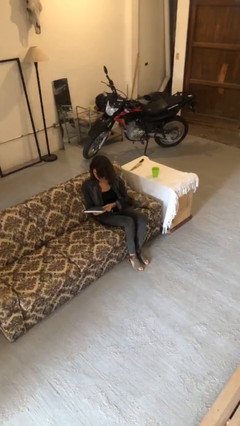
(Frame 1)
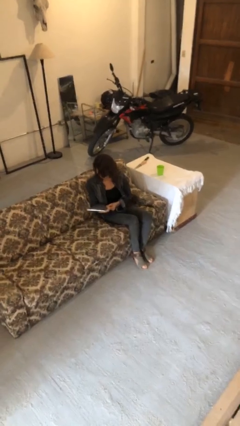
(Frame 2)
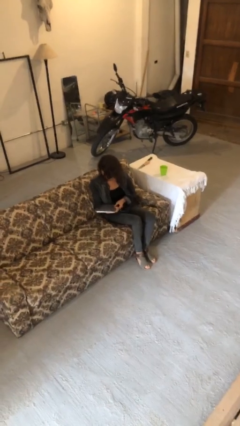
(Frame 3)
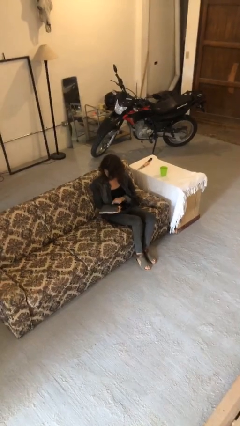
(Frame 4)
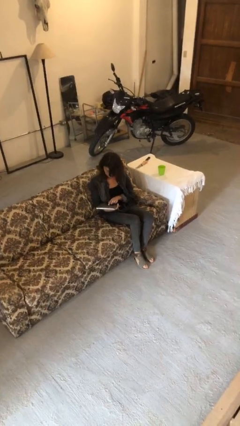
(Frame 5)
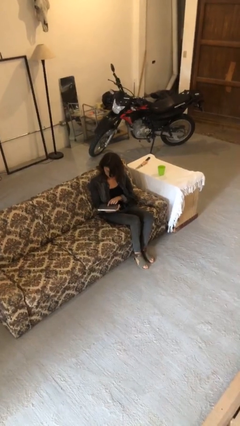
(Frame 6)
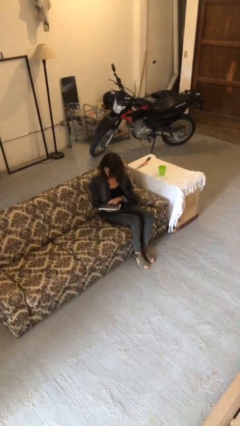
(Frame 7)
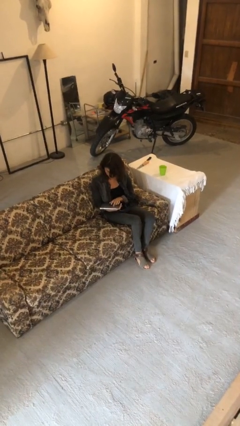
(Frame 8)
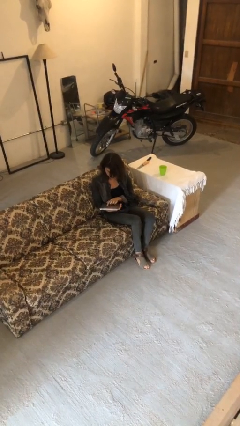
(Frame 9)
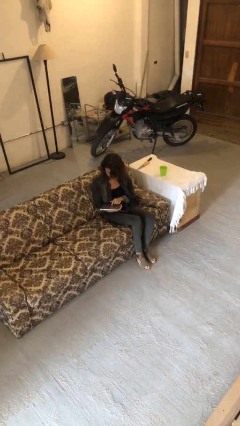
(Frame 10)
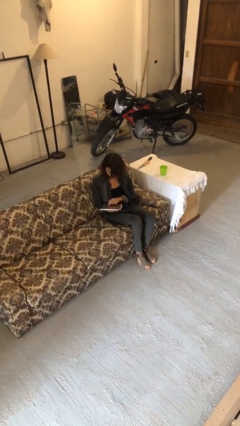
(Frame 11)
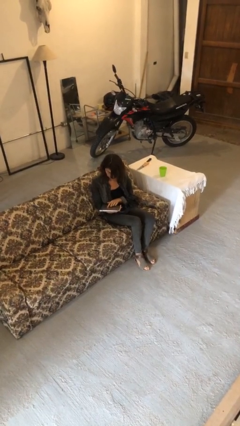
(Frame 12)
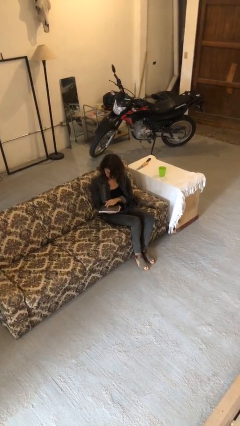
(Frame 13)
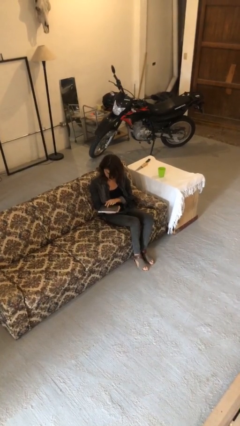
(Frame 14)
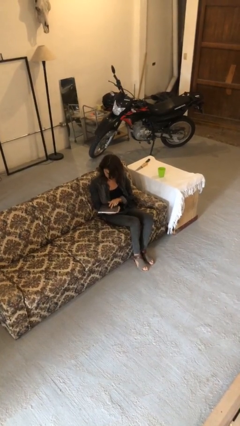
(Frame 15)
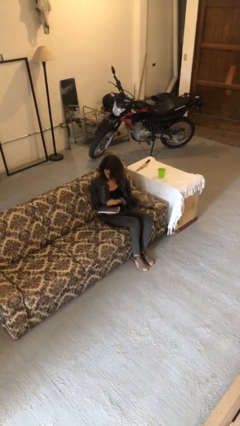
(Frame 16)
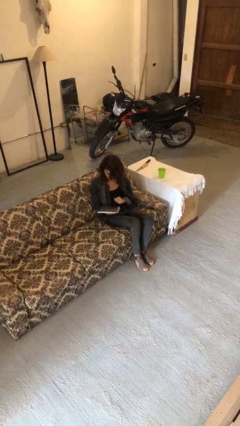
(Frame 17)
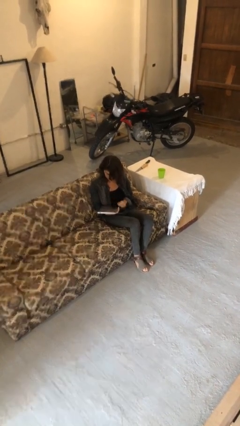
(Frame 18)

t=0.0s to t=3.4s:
person interacts with tablet

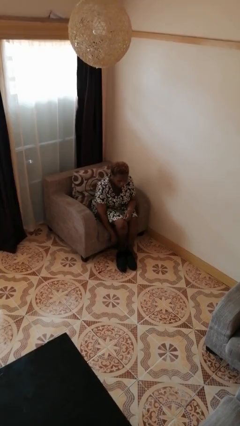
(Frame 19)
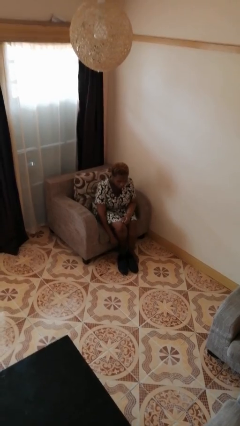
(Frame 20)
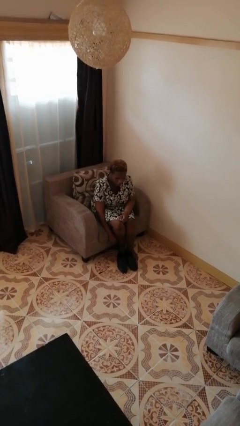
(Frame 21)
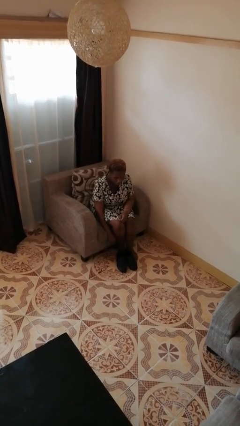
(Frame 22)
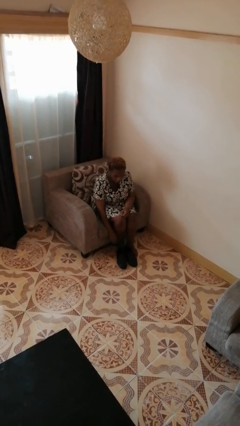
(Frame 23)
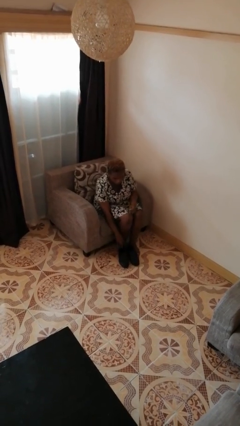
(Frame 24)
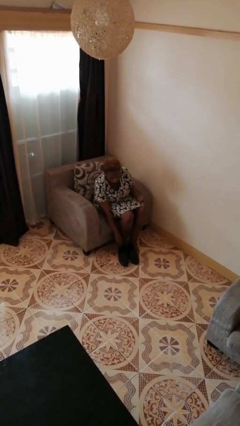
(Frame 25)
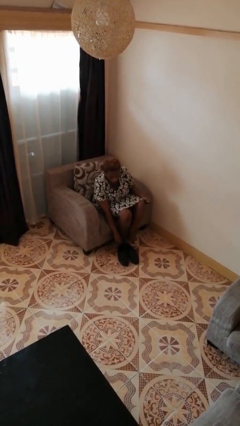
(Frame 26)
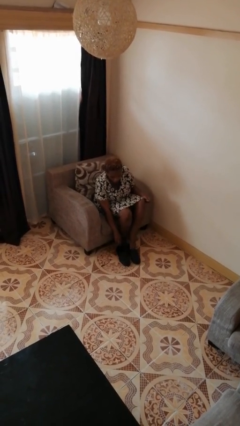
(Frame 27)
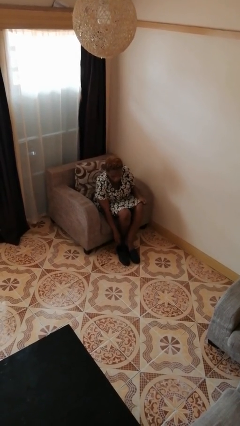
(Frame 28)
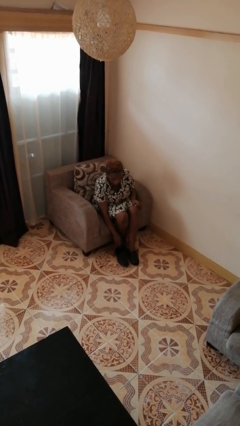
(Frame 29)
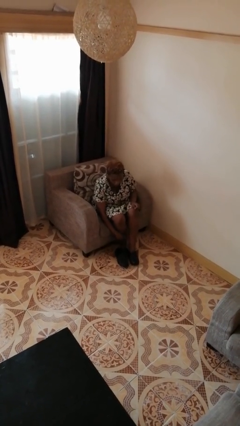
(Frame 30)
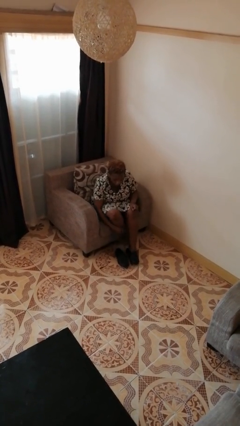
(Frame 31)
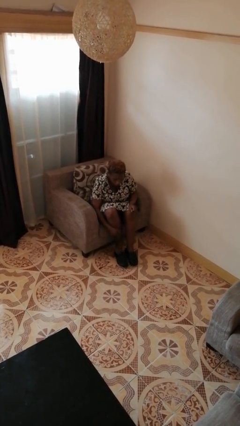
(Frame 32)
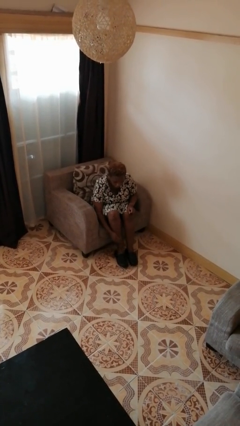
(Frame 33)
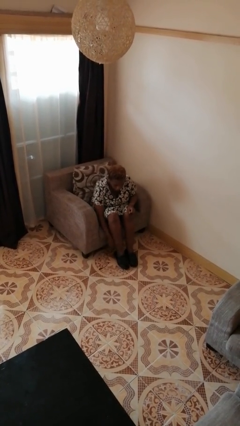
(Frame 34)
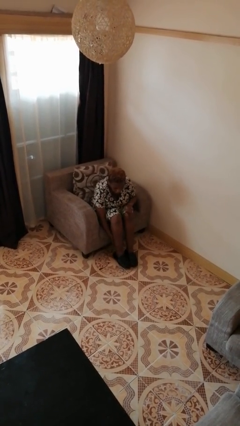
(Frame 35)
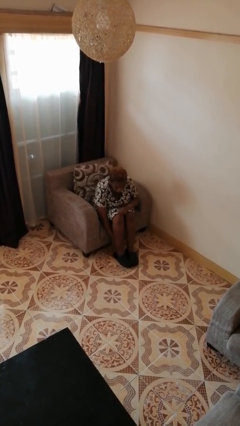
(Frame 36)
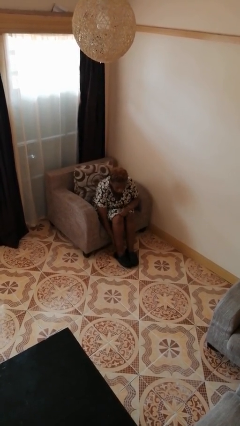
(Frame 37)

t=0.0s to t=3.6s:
person puts on shoes

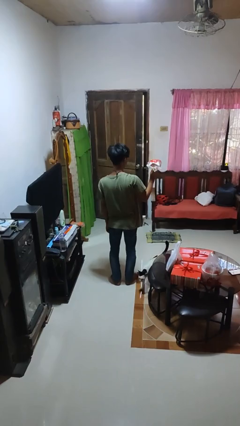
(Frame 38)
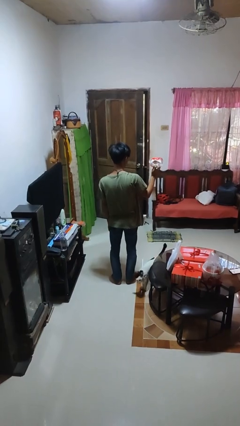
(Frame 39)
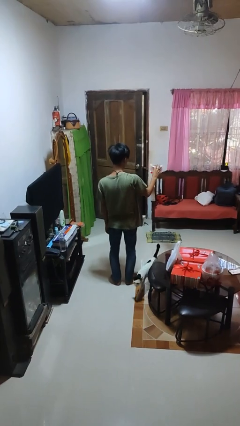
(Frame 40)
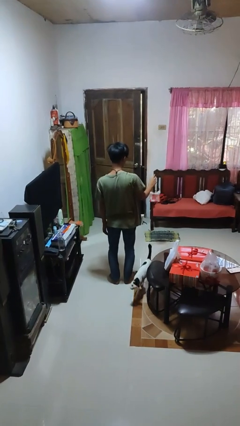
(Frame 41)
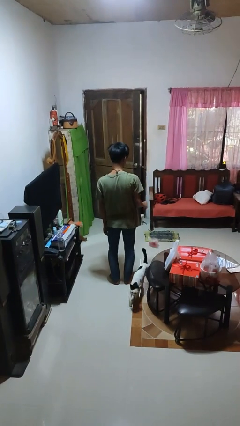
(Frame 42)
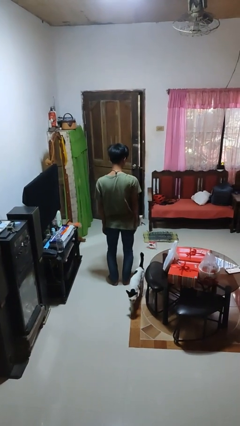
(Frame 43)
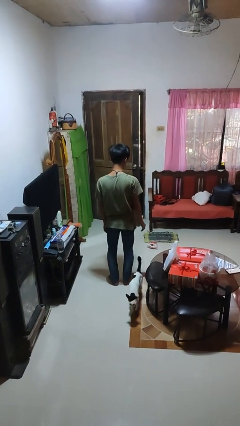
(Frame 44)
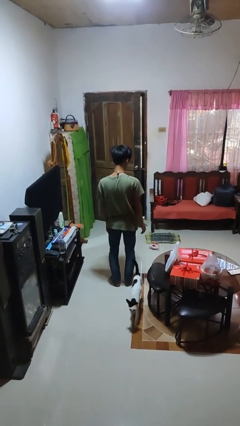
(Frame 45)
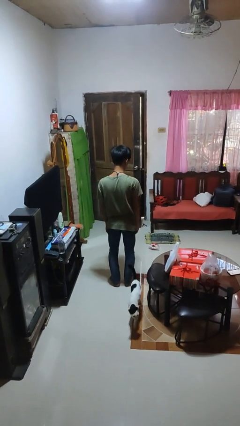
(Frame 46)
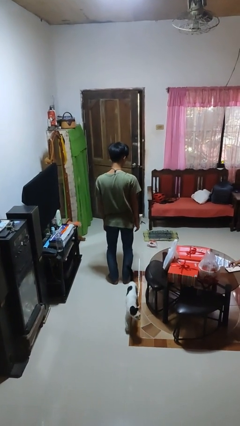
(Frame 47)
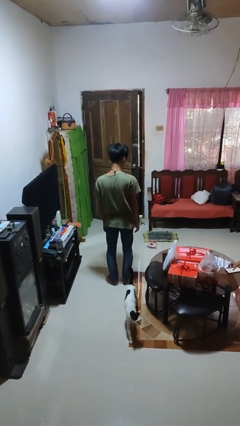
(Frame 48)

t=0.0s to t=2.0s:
person throws object to ground

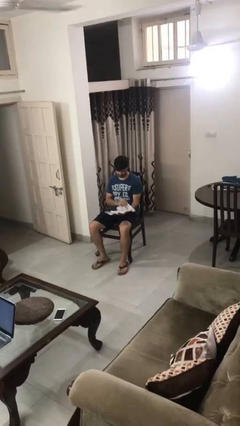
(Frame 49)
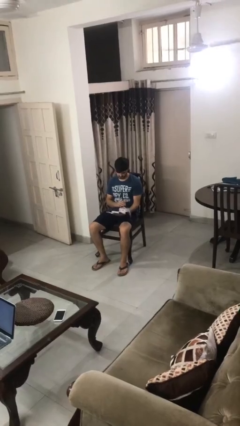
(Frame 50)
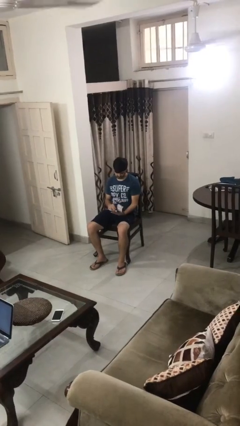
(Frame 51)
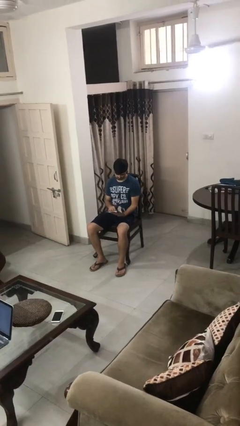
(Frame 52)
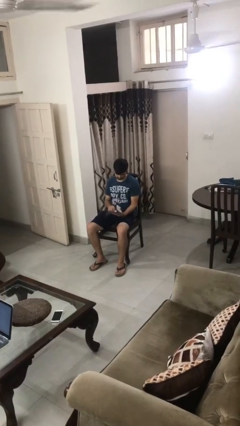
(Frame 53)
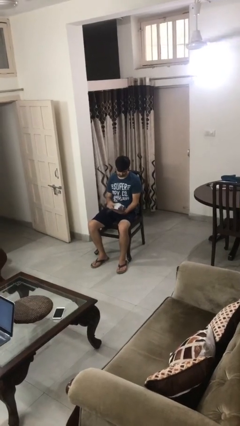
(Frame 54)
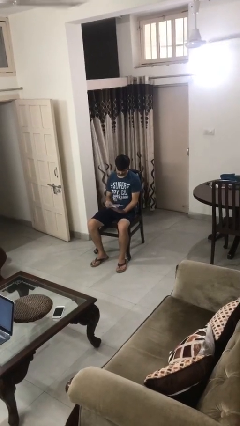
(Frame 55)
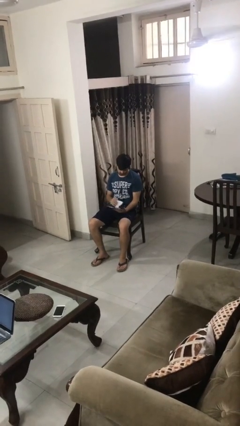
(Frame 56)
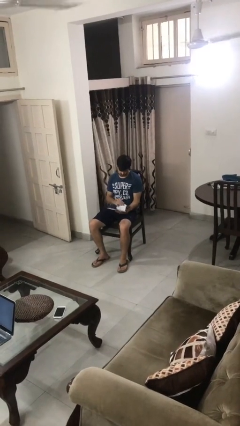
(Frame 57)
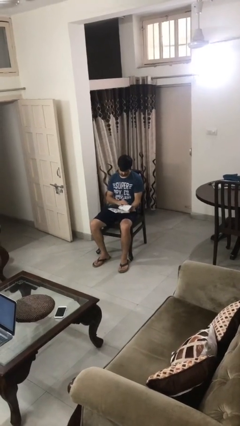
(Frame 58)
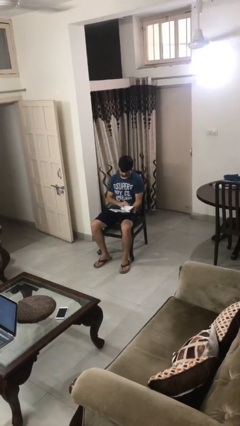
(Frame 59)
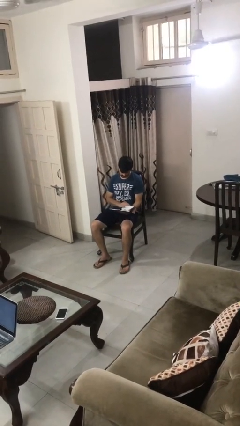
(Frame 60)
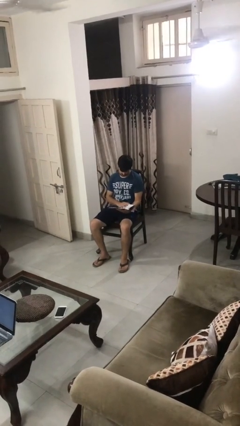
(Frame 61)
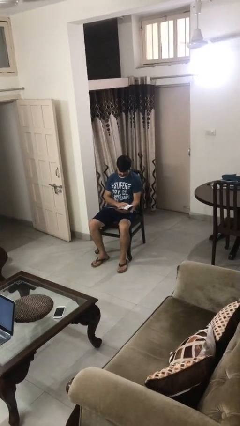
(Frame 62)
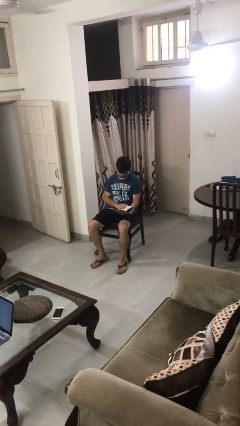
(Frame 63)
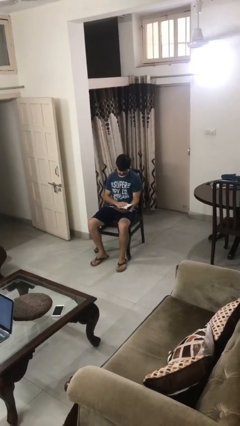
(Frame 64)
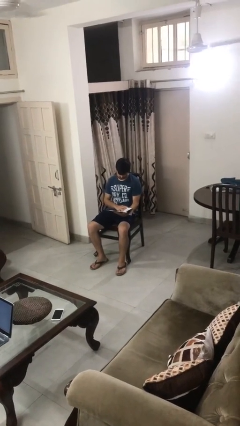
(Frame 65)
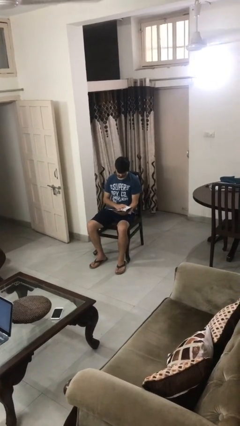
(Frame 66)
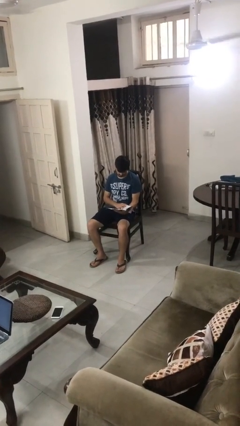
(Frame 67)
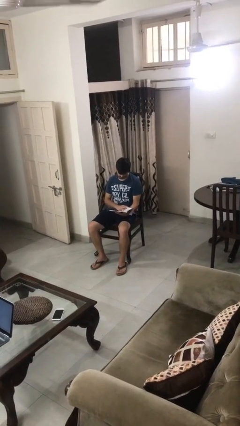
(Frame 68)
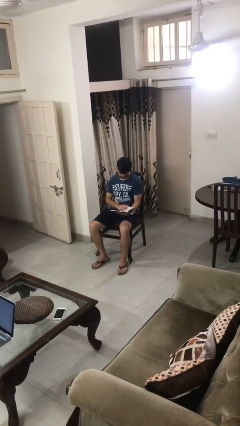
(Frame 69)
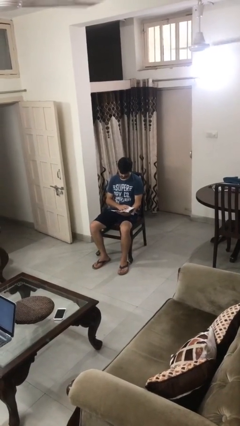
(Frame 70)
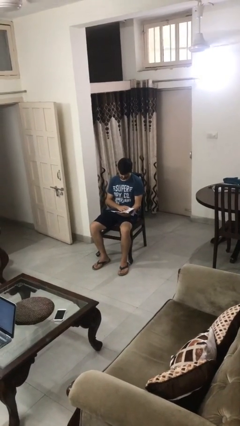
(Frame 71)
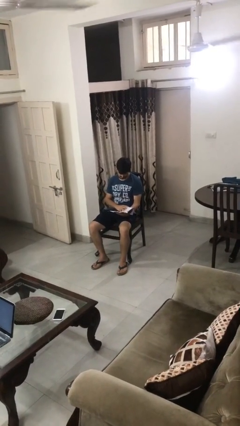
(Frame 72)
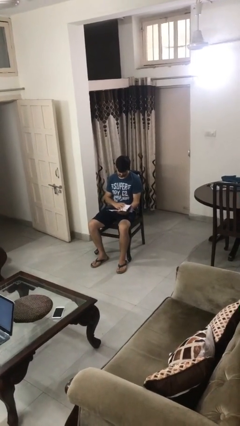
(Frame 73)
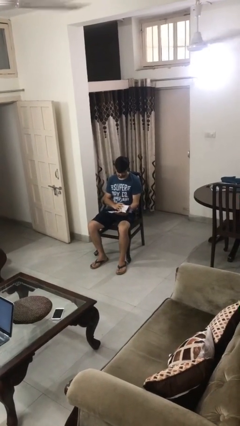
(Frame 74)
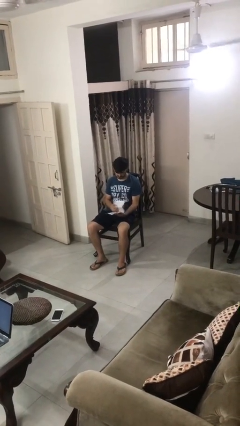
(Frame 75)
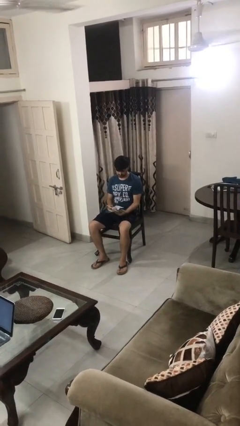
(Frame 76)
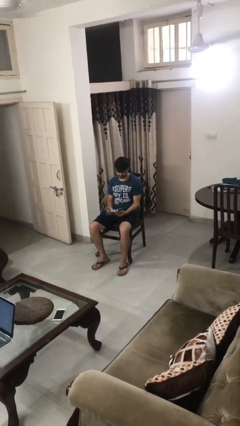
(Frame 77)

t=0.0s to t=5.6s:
person reads magazine

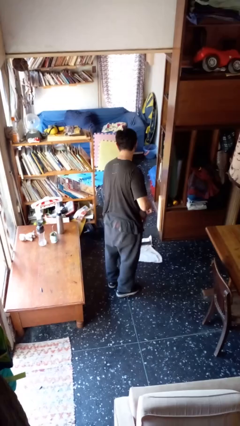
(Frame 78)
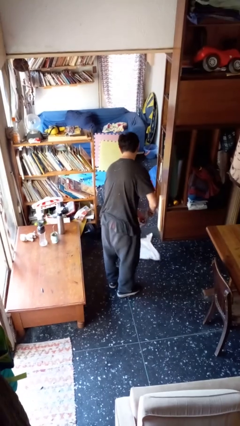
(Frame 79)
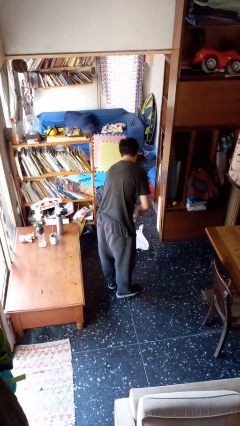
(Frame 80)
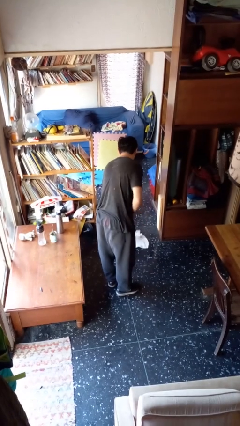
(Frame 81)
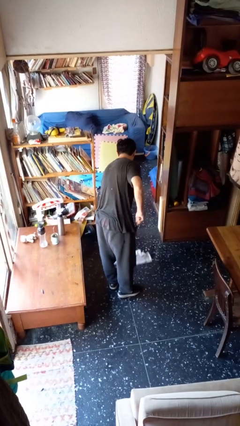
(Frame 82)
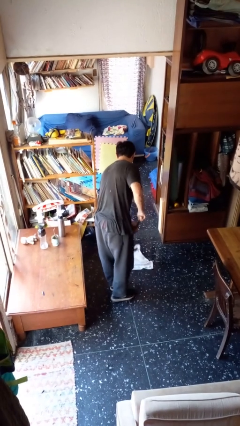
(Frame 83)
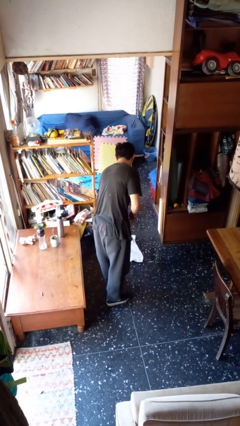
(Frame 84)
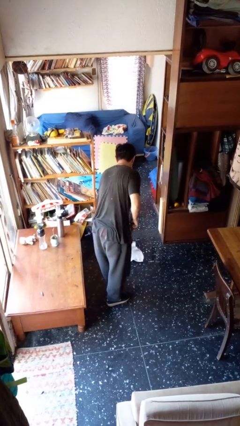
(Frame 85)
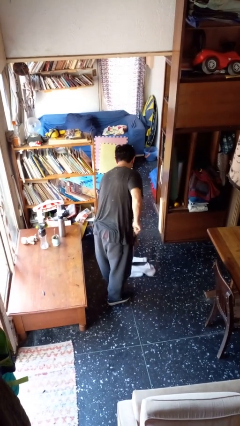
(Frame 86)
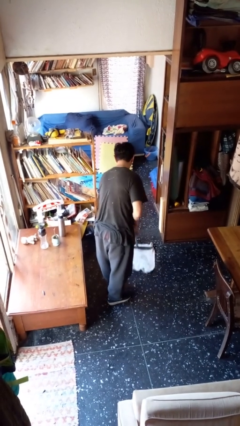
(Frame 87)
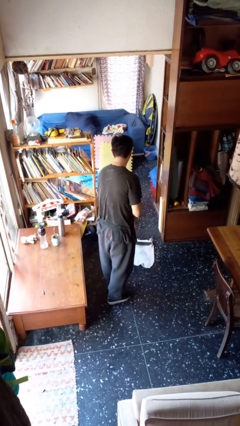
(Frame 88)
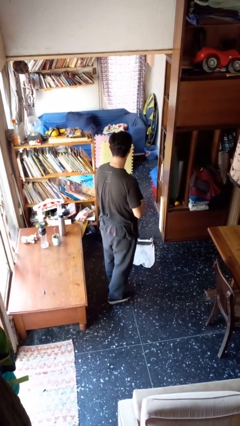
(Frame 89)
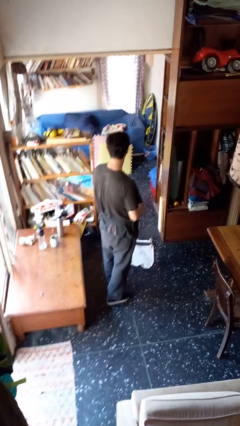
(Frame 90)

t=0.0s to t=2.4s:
person mops
